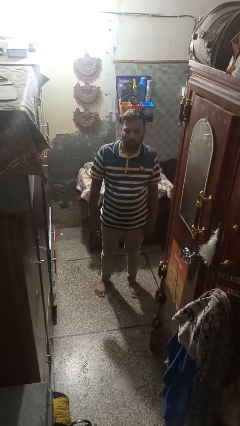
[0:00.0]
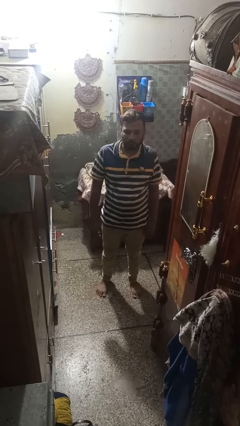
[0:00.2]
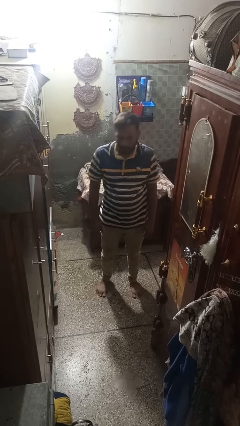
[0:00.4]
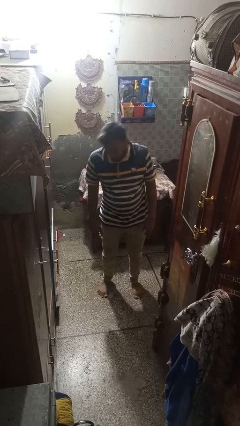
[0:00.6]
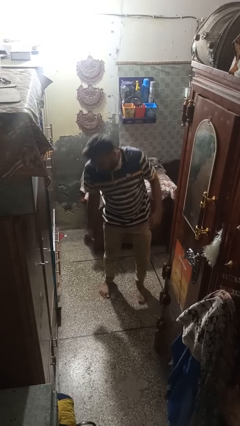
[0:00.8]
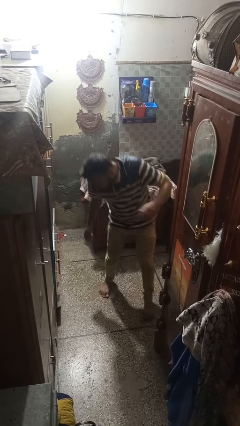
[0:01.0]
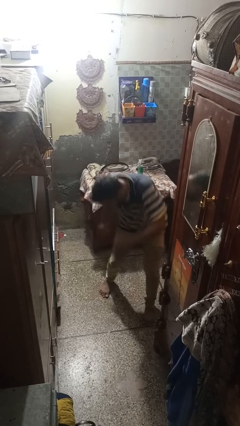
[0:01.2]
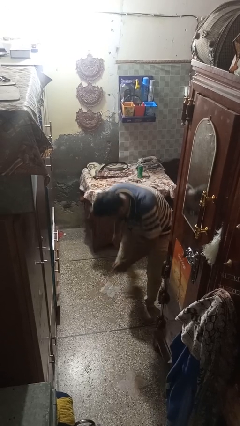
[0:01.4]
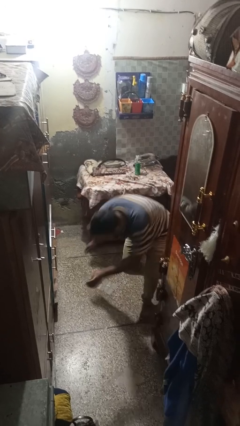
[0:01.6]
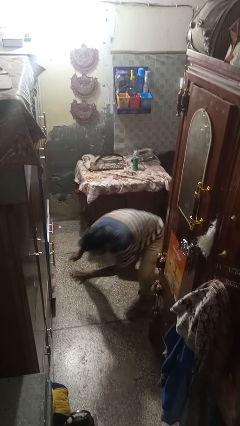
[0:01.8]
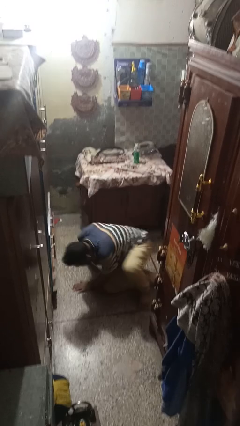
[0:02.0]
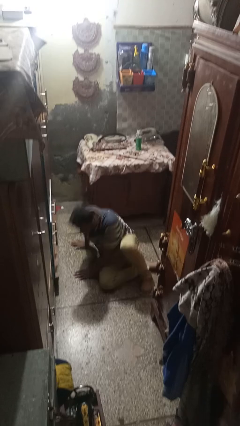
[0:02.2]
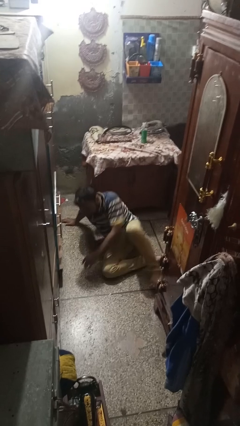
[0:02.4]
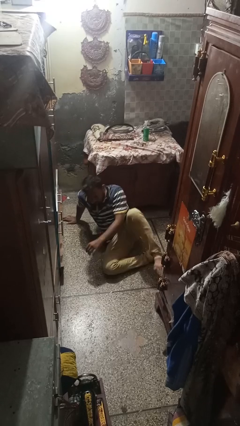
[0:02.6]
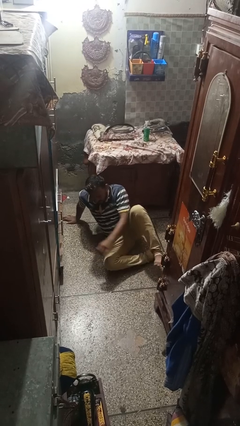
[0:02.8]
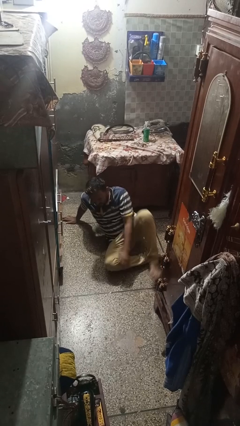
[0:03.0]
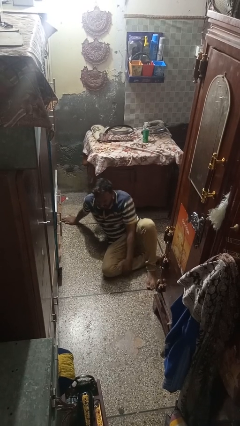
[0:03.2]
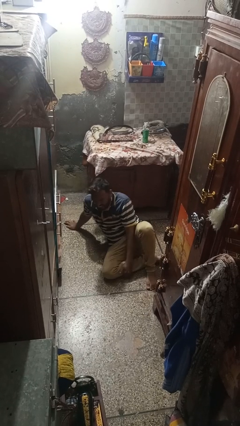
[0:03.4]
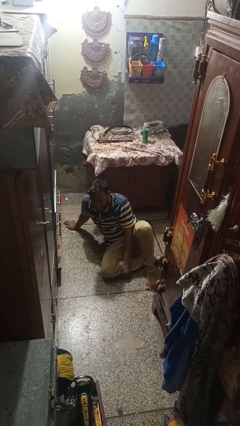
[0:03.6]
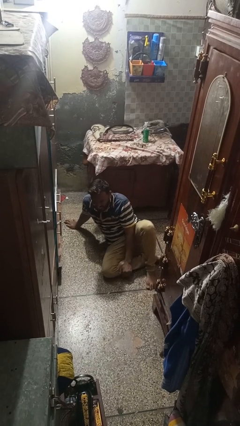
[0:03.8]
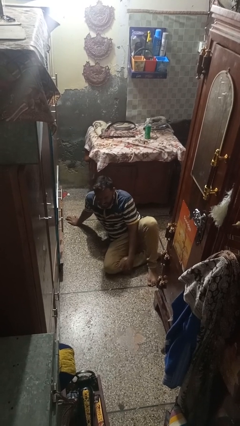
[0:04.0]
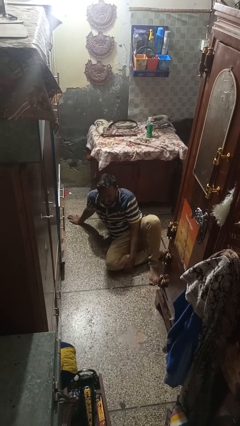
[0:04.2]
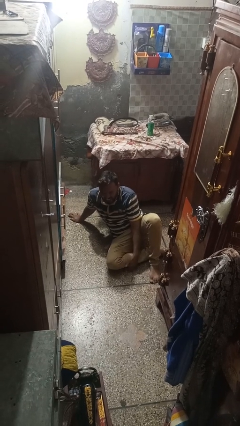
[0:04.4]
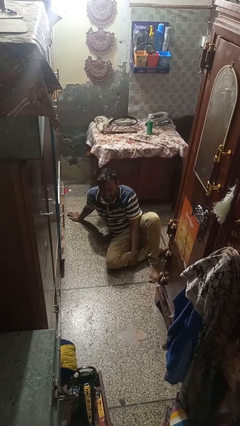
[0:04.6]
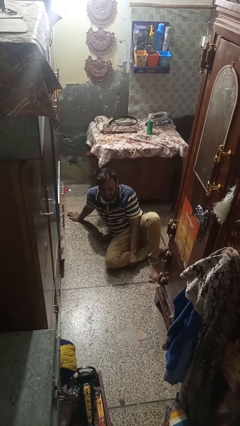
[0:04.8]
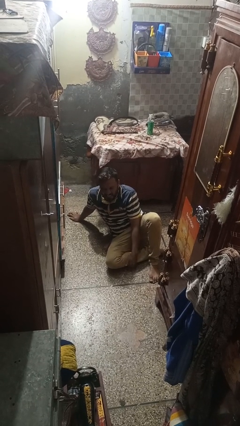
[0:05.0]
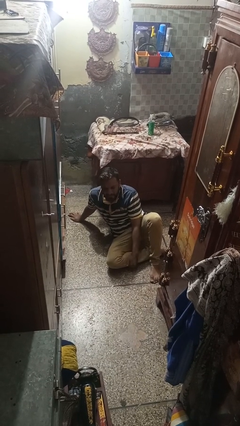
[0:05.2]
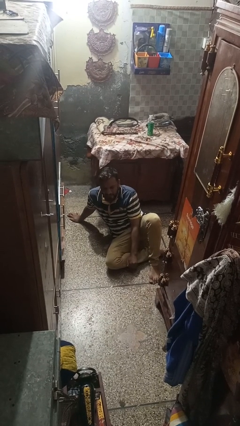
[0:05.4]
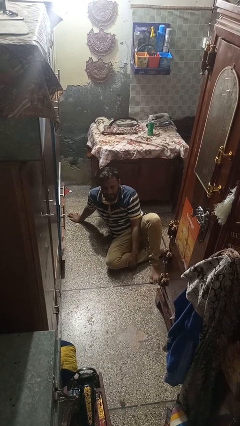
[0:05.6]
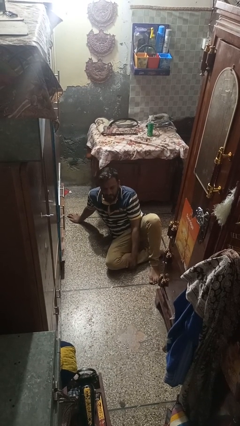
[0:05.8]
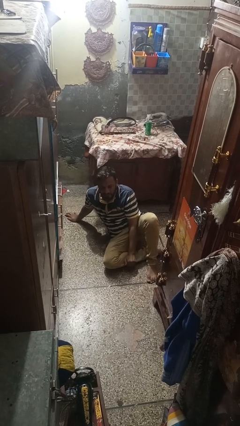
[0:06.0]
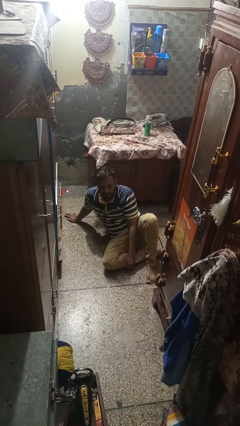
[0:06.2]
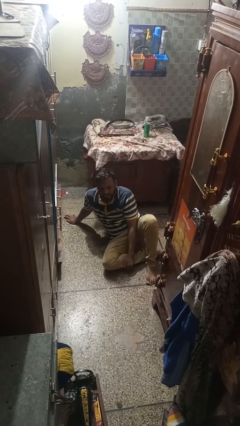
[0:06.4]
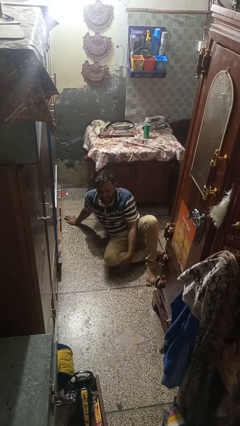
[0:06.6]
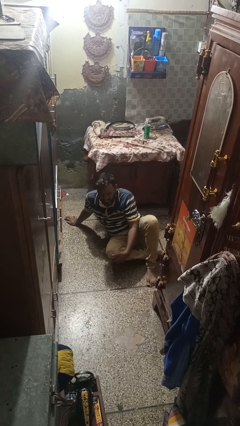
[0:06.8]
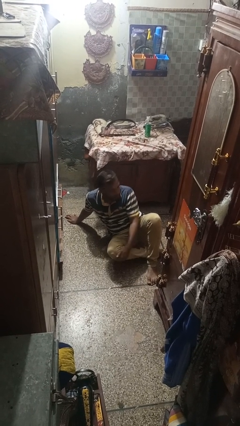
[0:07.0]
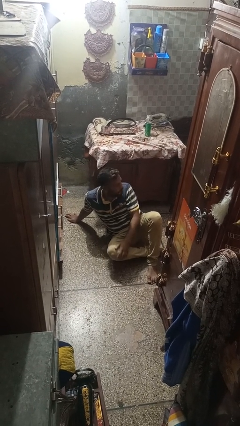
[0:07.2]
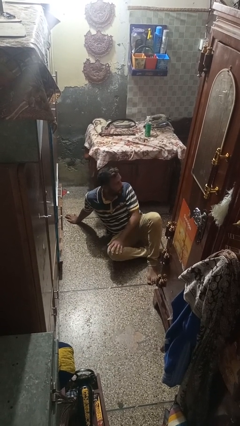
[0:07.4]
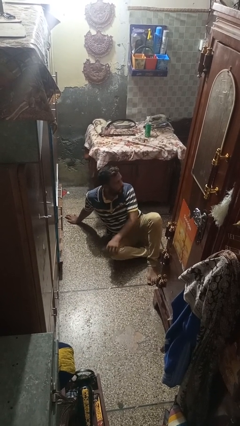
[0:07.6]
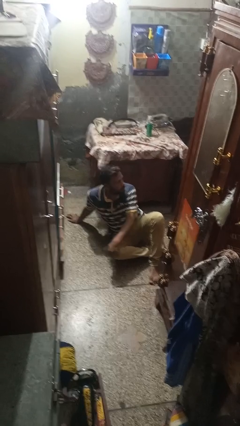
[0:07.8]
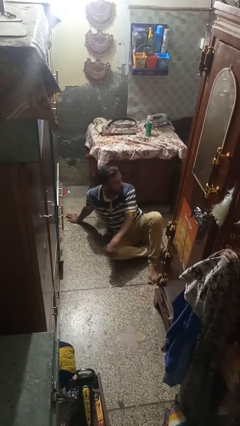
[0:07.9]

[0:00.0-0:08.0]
person falls while standing

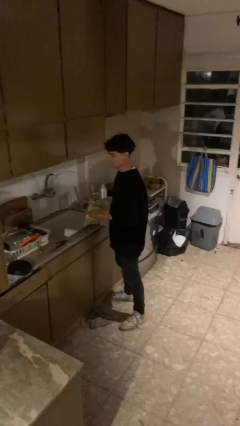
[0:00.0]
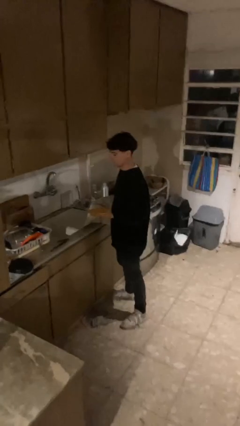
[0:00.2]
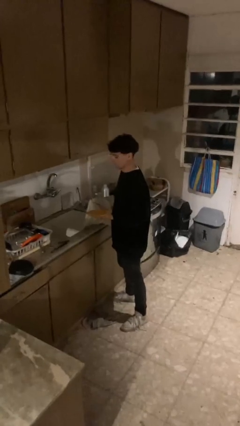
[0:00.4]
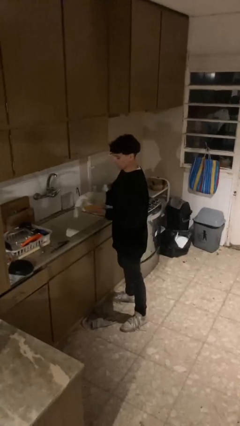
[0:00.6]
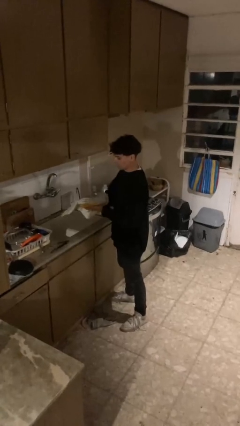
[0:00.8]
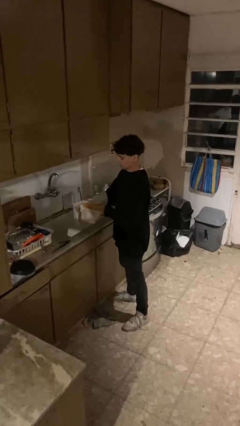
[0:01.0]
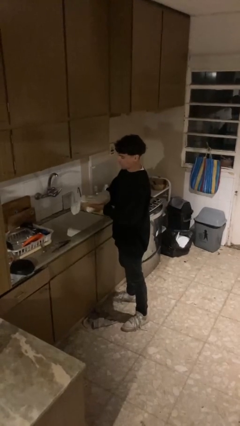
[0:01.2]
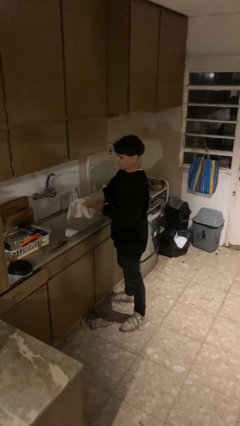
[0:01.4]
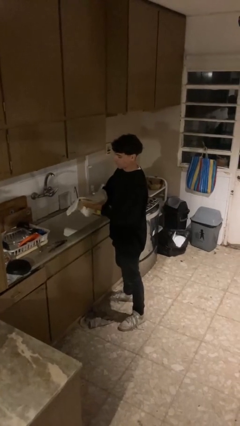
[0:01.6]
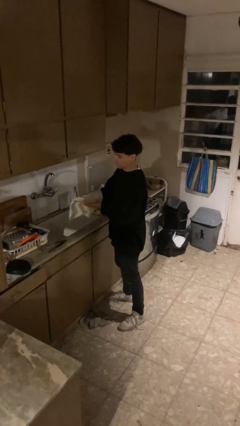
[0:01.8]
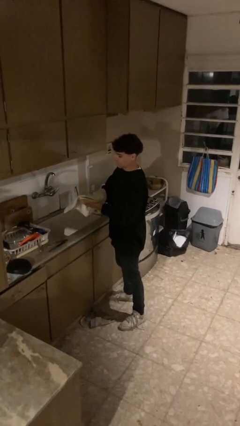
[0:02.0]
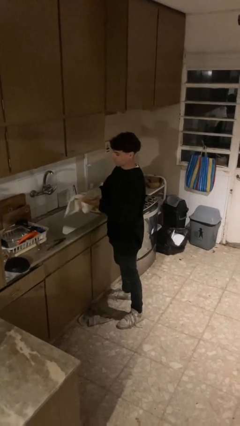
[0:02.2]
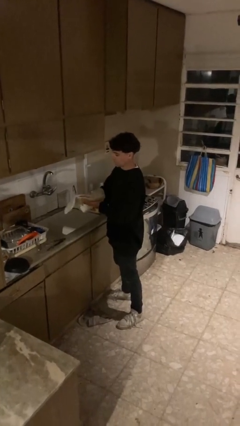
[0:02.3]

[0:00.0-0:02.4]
person dries dish

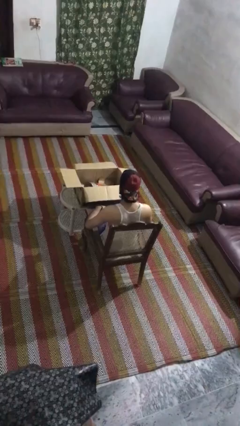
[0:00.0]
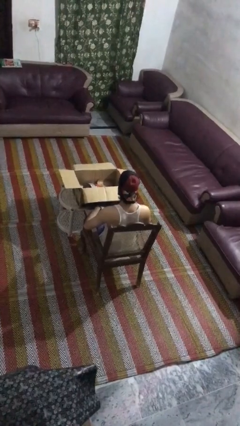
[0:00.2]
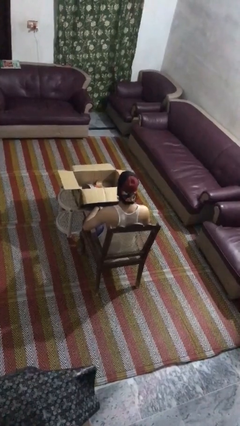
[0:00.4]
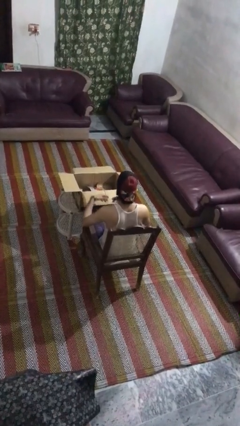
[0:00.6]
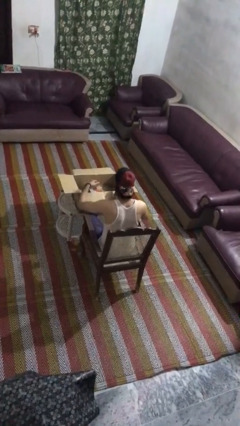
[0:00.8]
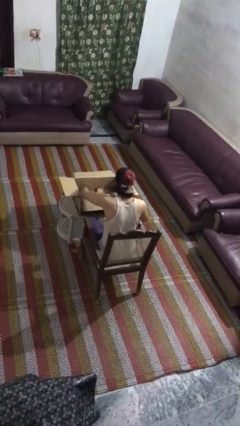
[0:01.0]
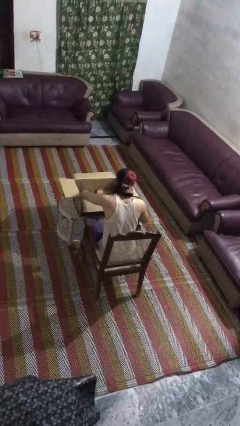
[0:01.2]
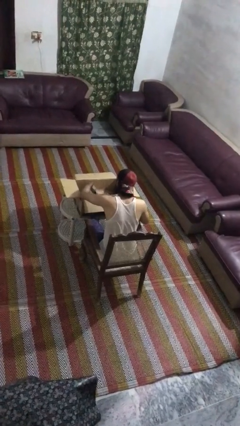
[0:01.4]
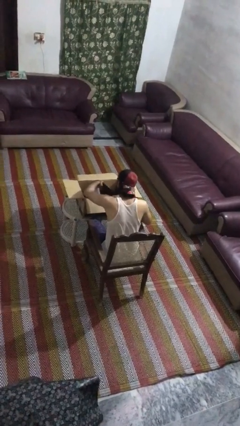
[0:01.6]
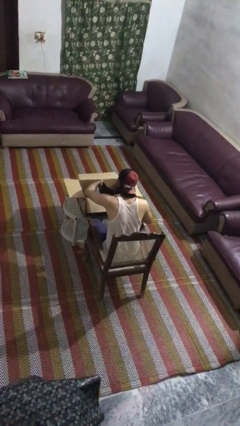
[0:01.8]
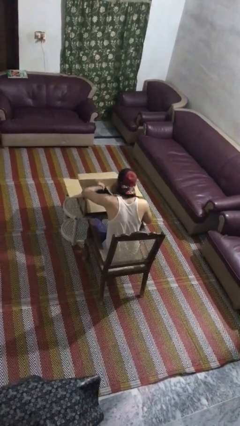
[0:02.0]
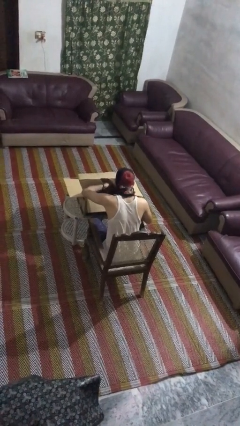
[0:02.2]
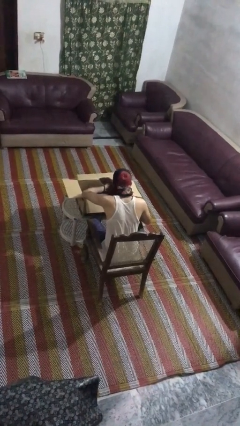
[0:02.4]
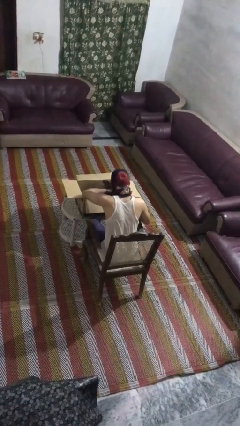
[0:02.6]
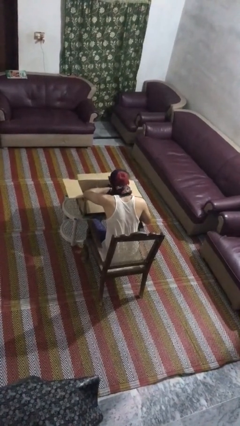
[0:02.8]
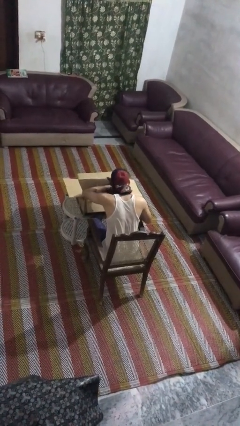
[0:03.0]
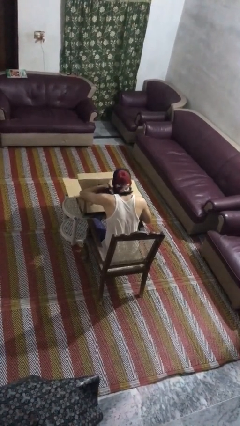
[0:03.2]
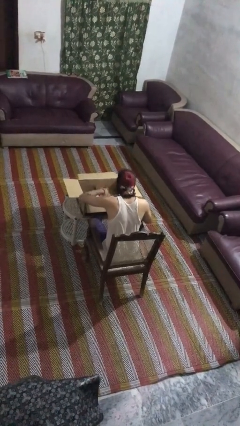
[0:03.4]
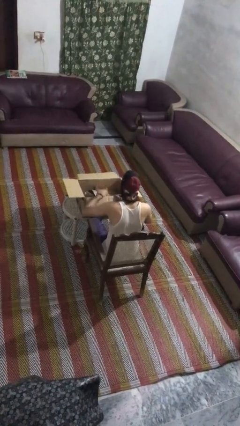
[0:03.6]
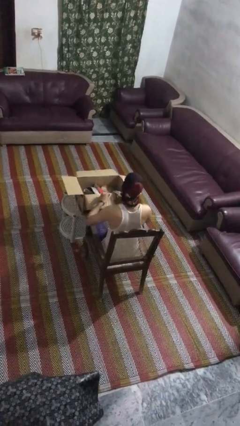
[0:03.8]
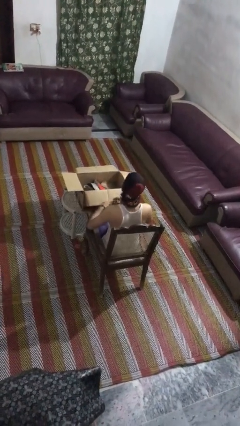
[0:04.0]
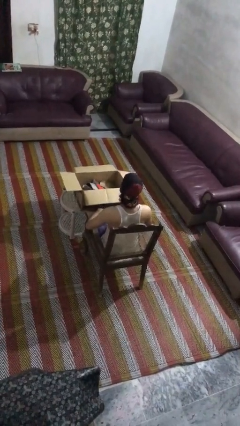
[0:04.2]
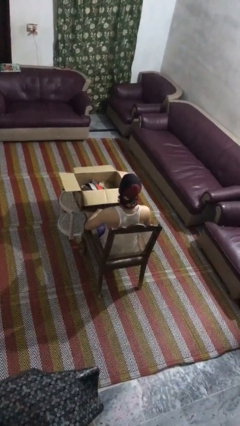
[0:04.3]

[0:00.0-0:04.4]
person searches in box

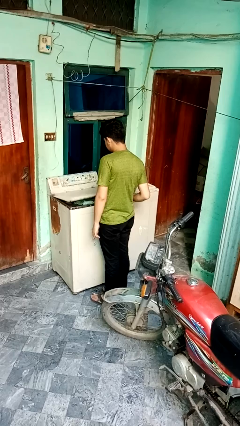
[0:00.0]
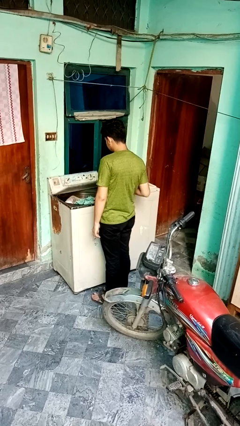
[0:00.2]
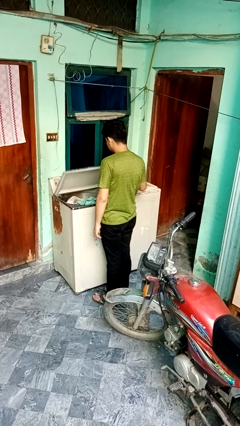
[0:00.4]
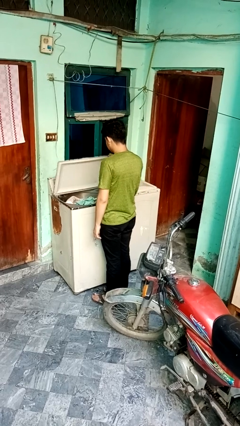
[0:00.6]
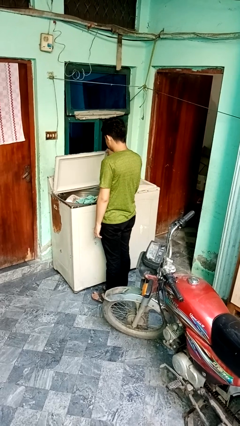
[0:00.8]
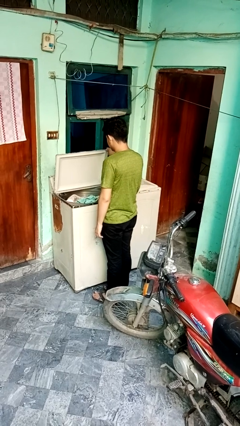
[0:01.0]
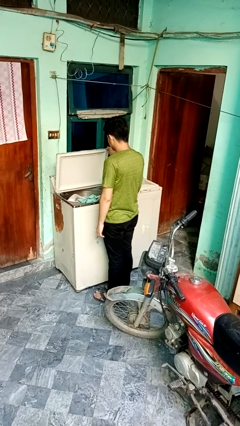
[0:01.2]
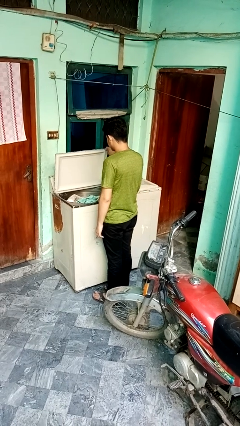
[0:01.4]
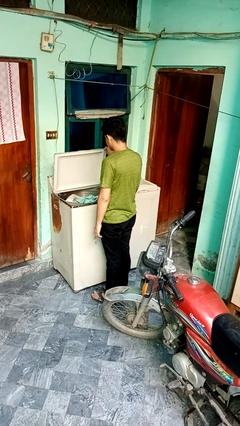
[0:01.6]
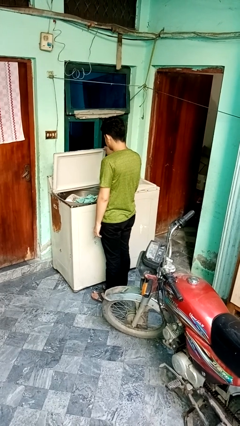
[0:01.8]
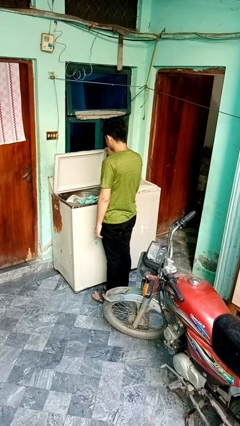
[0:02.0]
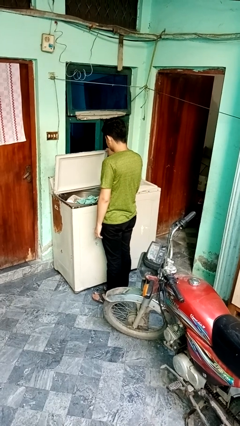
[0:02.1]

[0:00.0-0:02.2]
person opens clothes washer

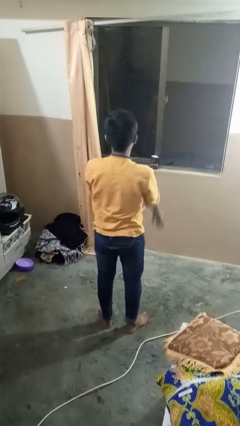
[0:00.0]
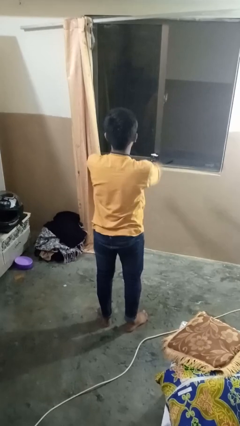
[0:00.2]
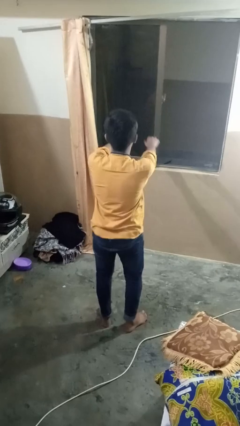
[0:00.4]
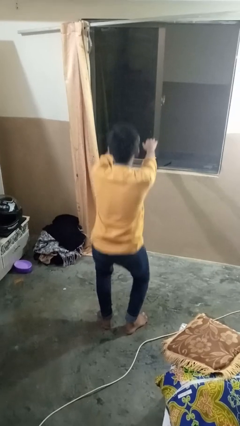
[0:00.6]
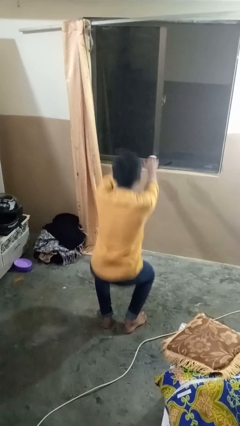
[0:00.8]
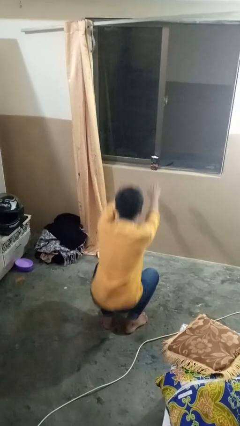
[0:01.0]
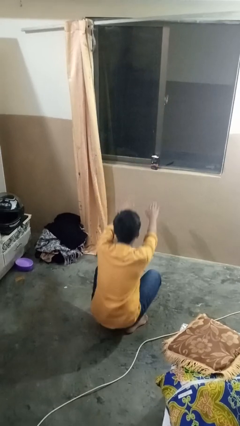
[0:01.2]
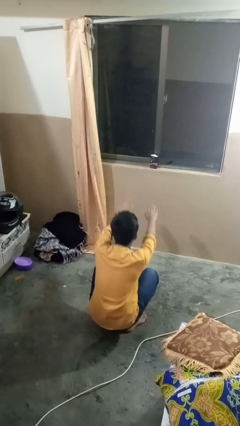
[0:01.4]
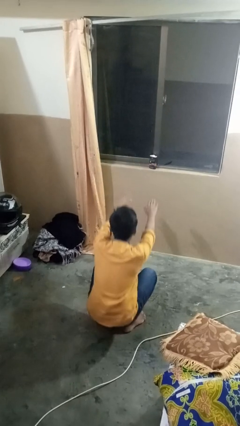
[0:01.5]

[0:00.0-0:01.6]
person squats
